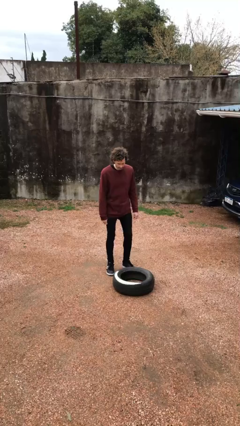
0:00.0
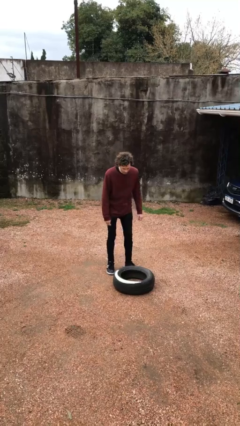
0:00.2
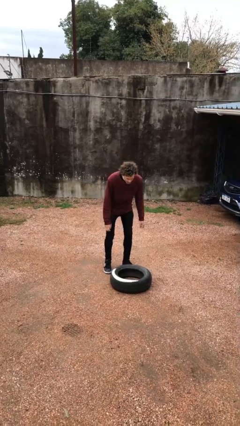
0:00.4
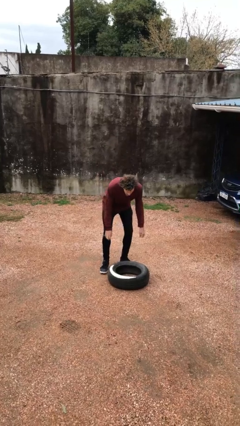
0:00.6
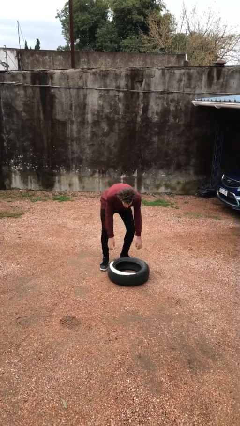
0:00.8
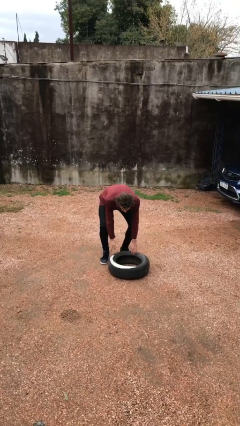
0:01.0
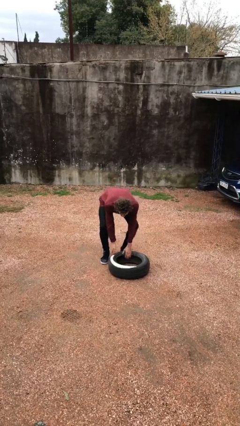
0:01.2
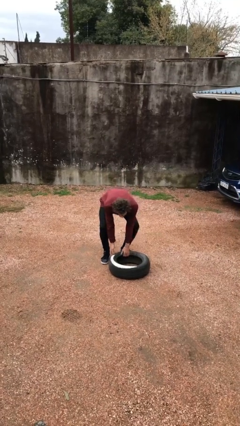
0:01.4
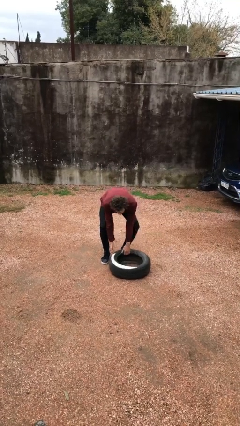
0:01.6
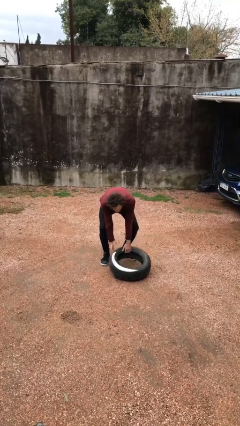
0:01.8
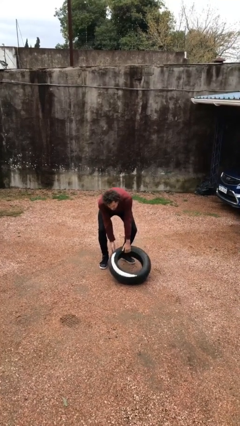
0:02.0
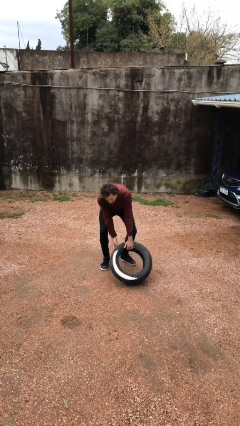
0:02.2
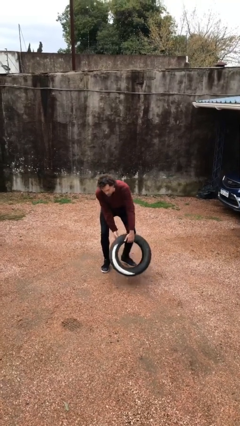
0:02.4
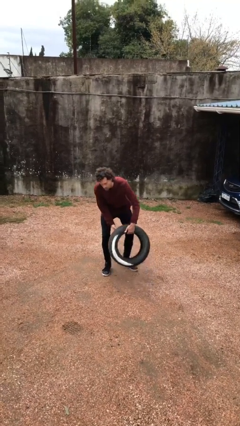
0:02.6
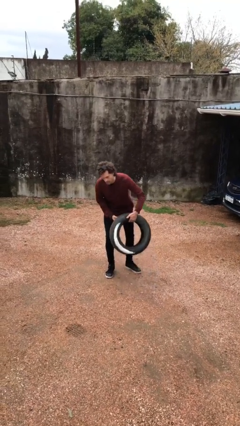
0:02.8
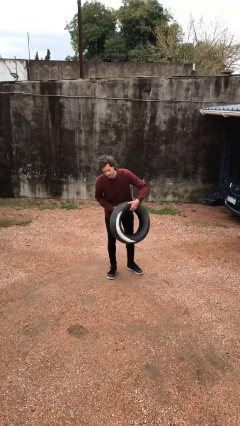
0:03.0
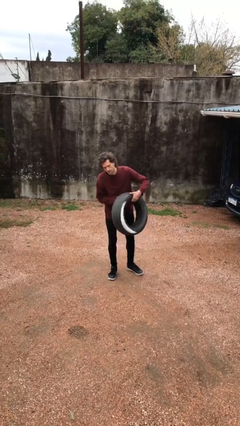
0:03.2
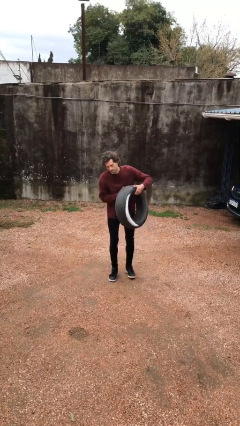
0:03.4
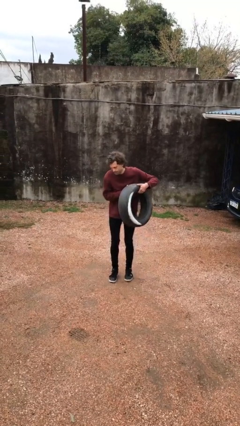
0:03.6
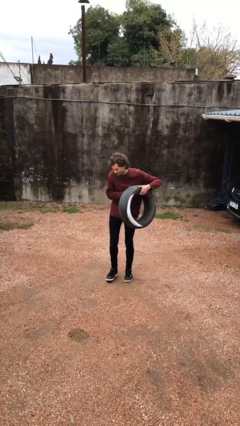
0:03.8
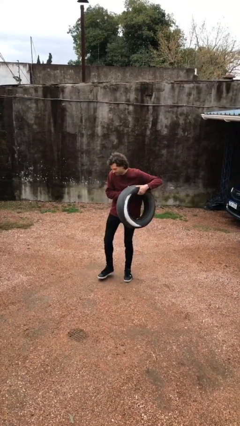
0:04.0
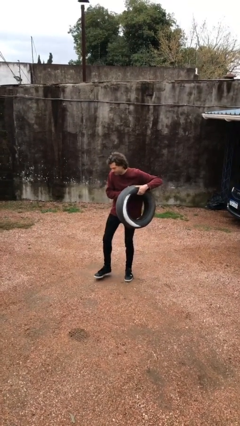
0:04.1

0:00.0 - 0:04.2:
person picks up object from floor

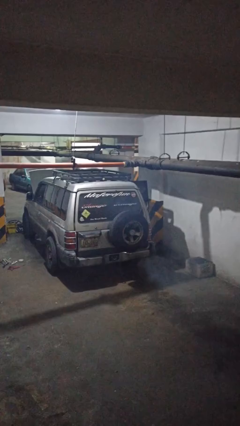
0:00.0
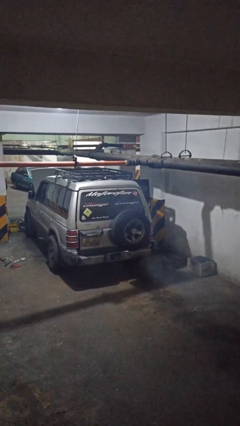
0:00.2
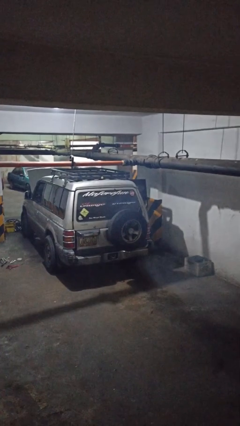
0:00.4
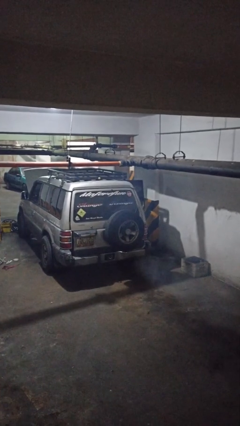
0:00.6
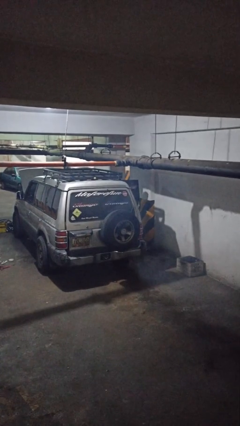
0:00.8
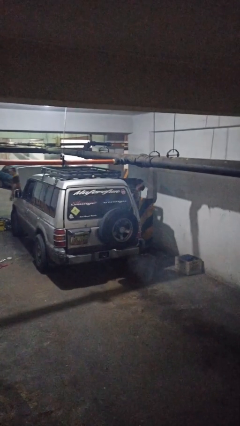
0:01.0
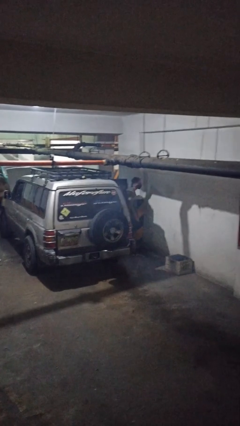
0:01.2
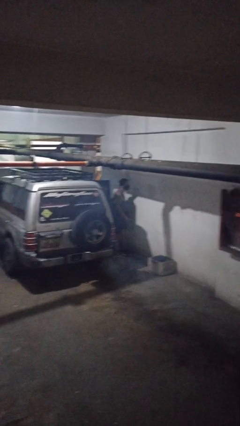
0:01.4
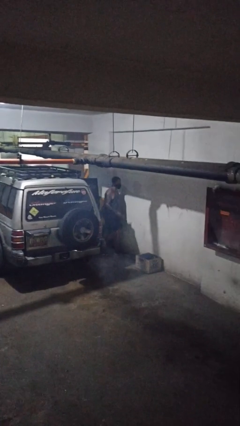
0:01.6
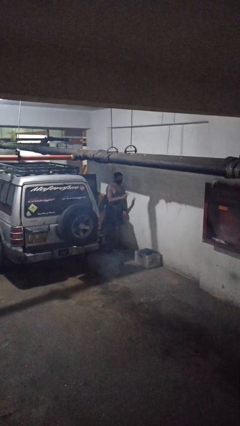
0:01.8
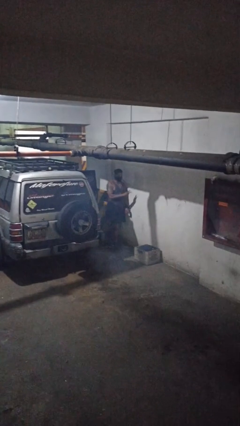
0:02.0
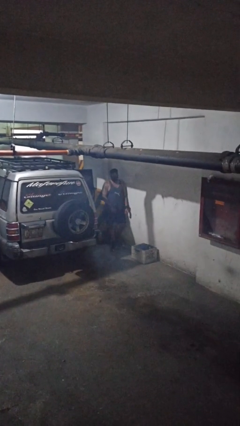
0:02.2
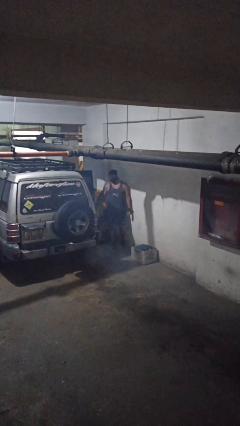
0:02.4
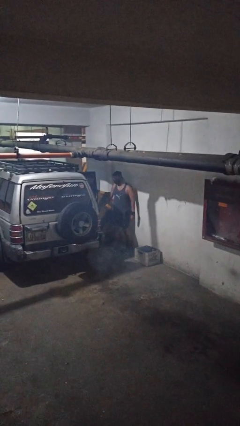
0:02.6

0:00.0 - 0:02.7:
person exits car

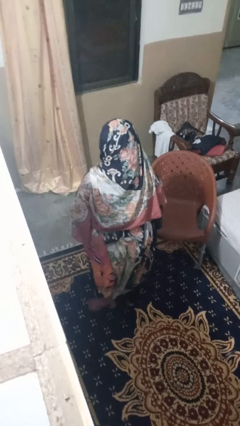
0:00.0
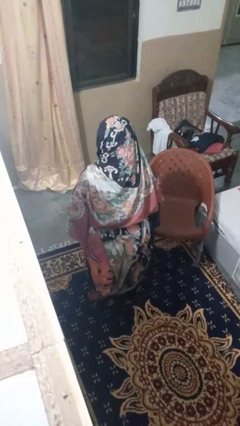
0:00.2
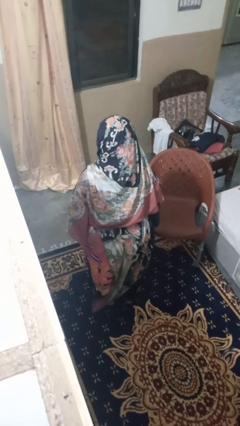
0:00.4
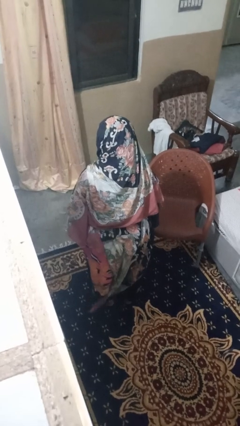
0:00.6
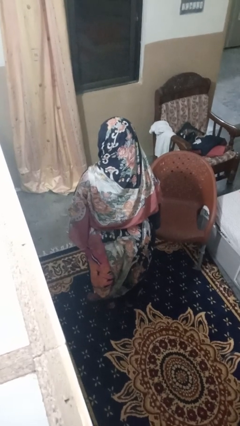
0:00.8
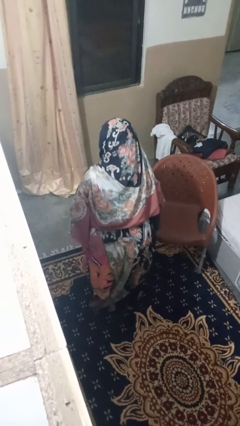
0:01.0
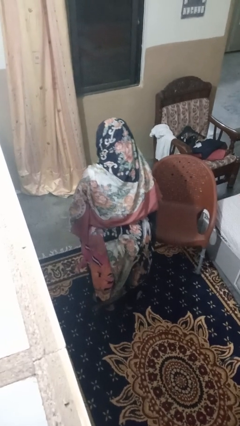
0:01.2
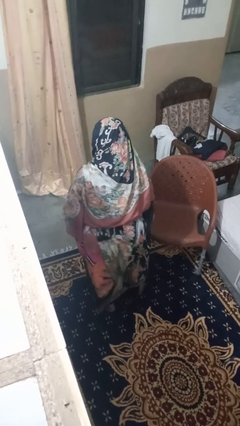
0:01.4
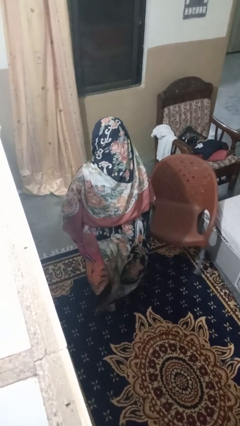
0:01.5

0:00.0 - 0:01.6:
person trips on object on floor

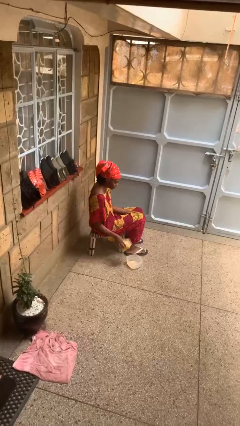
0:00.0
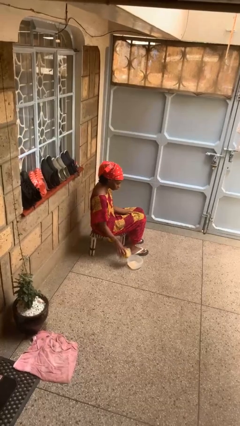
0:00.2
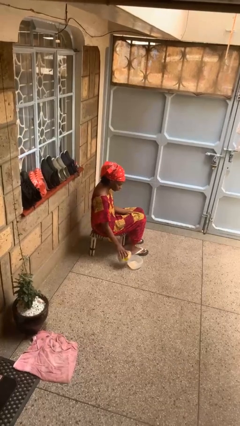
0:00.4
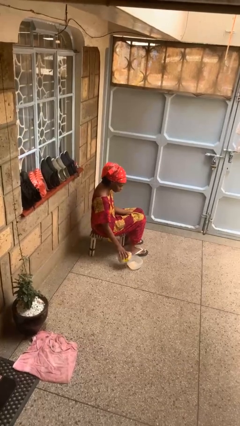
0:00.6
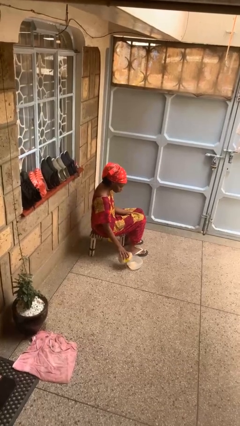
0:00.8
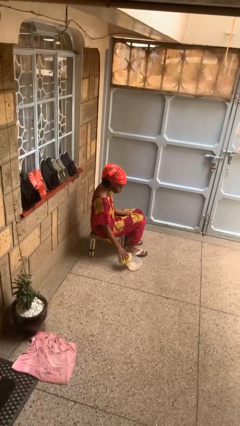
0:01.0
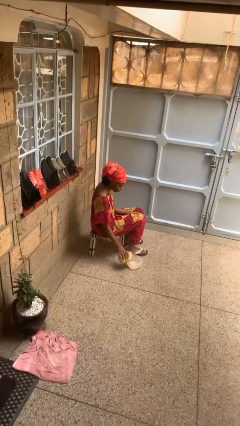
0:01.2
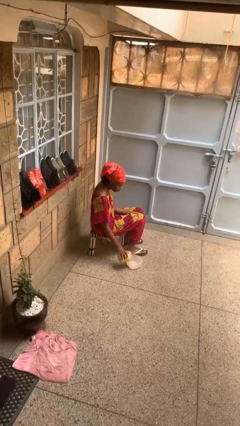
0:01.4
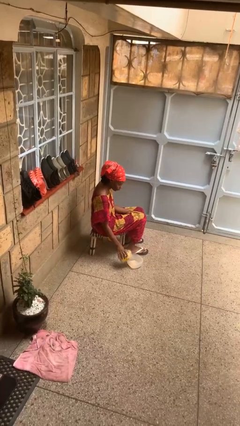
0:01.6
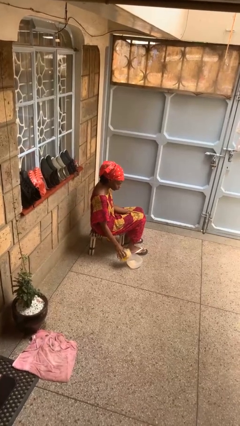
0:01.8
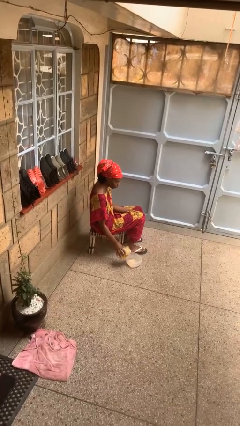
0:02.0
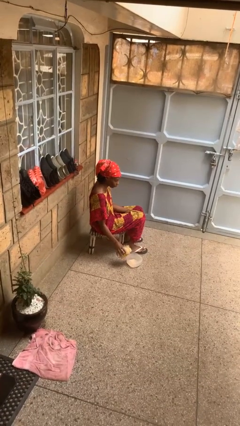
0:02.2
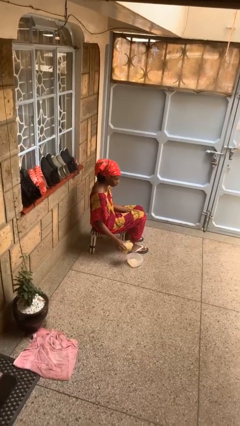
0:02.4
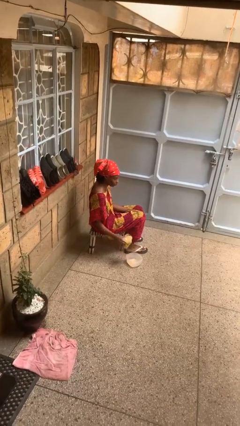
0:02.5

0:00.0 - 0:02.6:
person pours into bowl

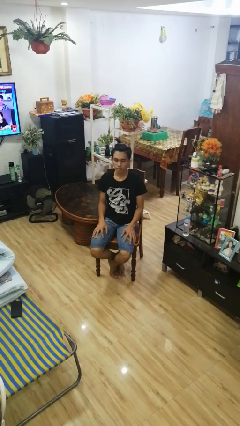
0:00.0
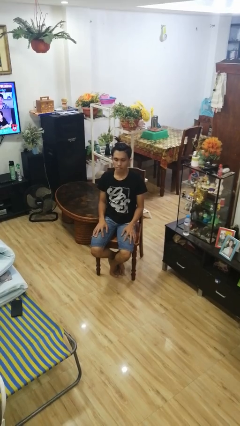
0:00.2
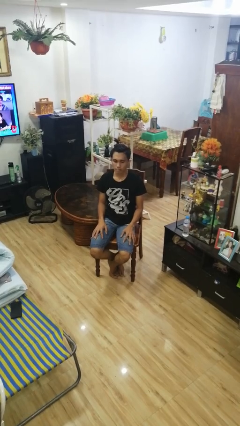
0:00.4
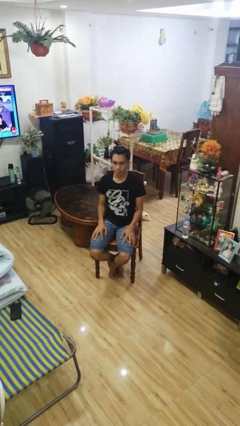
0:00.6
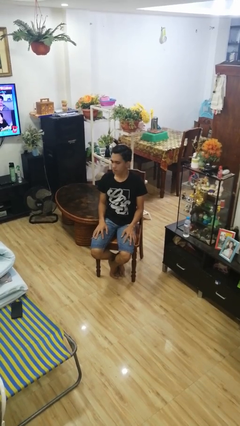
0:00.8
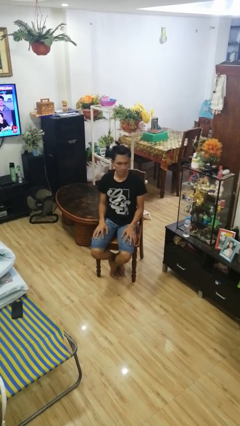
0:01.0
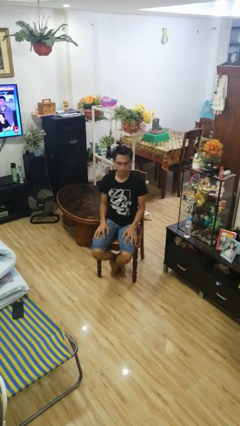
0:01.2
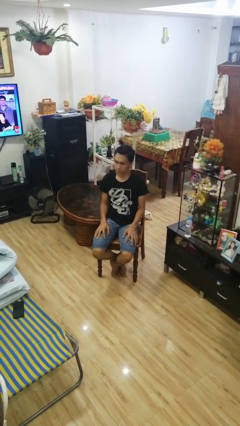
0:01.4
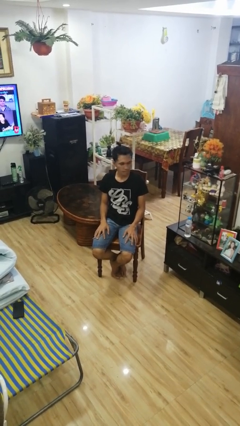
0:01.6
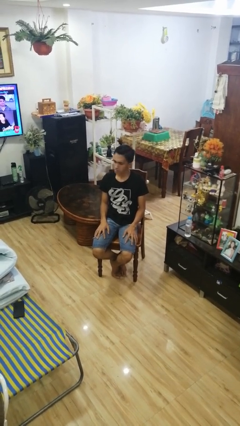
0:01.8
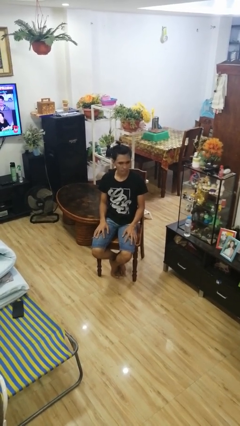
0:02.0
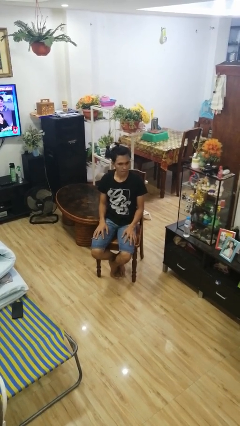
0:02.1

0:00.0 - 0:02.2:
person shakes head

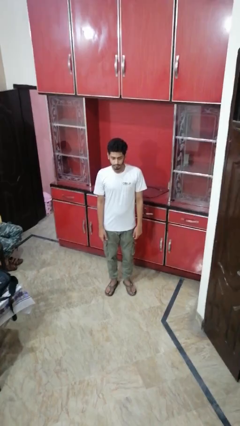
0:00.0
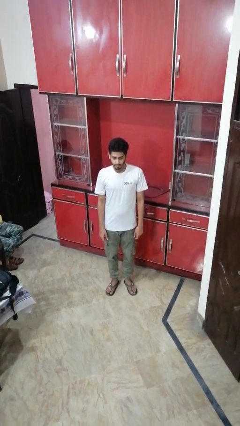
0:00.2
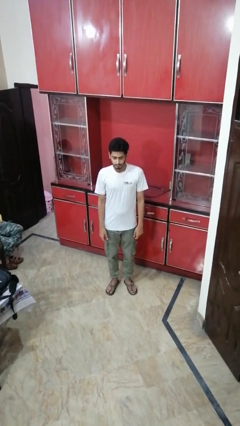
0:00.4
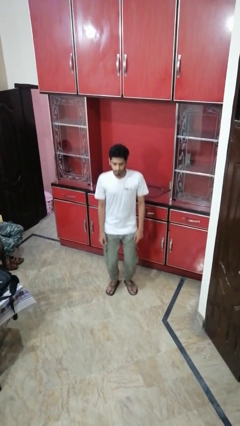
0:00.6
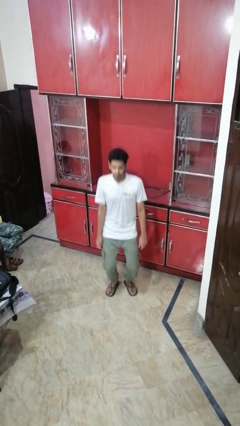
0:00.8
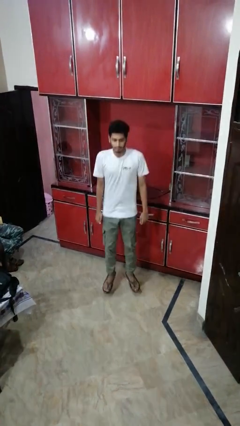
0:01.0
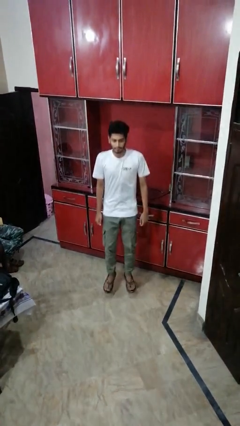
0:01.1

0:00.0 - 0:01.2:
person jumps

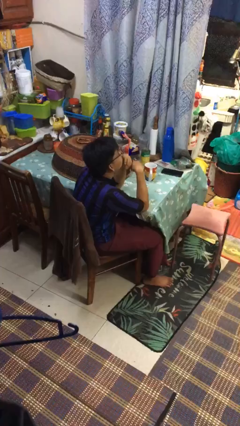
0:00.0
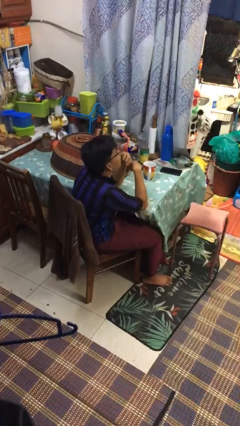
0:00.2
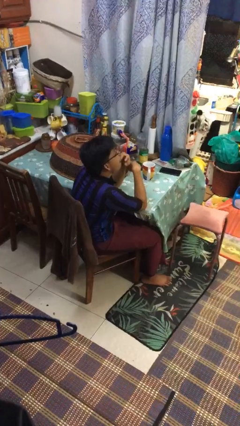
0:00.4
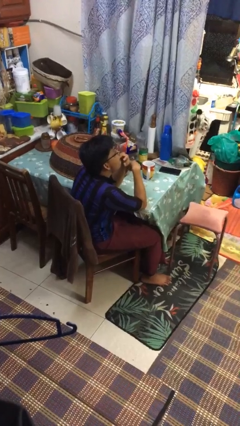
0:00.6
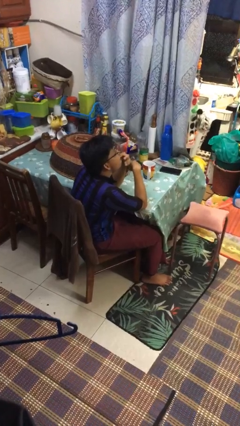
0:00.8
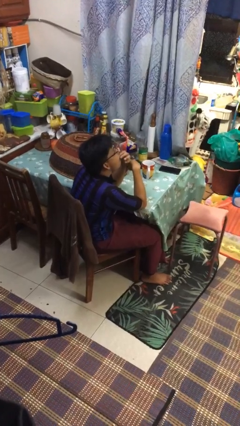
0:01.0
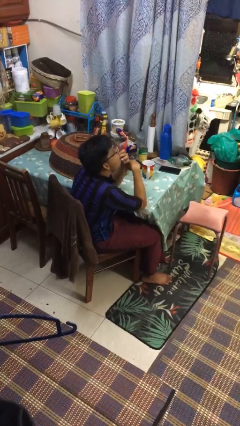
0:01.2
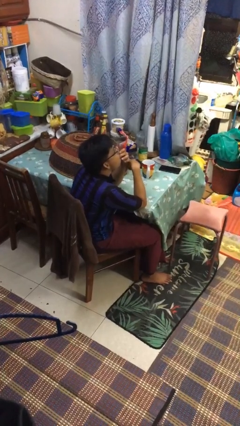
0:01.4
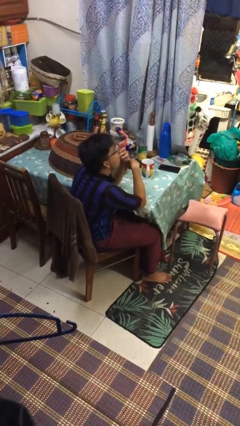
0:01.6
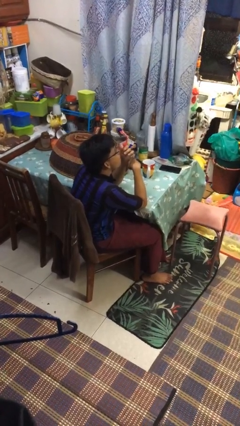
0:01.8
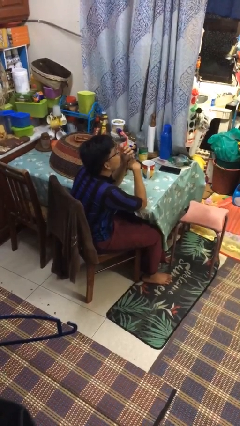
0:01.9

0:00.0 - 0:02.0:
person licks fingers

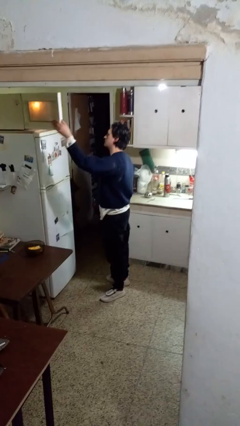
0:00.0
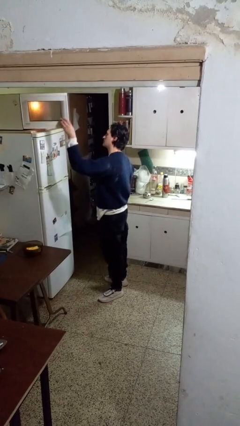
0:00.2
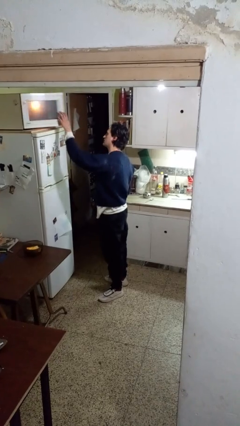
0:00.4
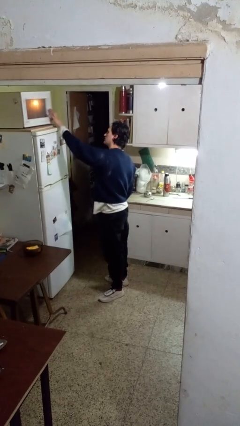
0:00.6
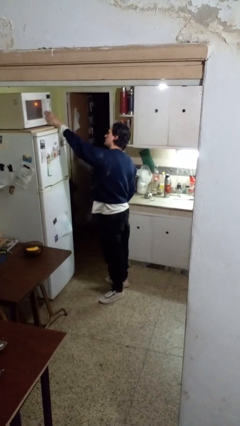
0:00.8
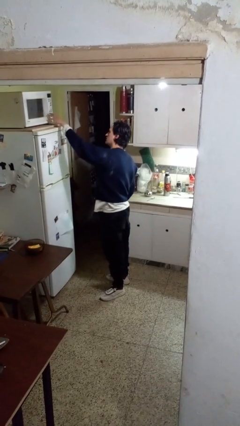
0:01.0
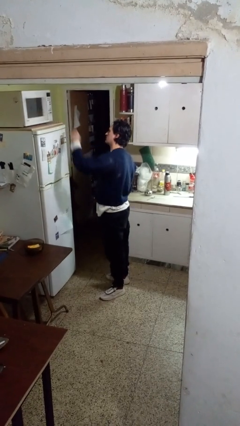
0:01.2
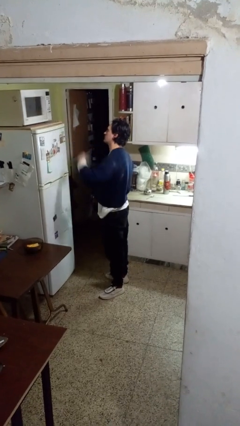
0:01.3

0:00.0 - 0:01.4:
person closes microwave
